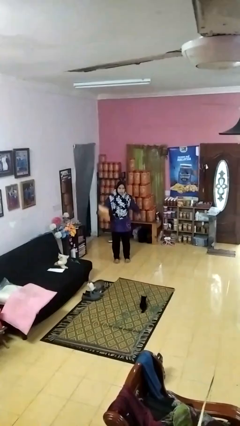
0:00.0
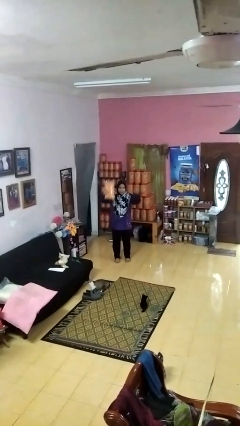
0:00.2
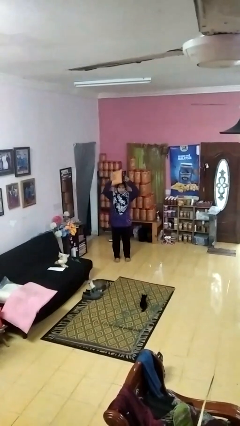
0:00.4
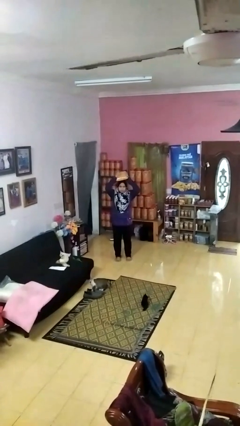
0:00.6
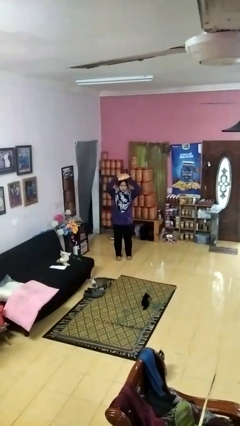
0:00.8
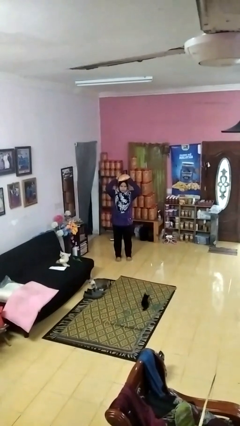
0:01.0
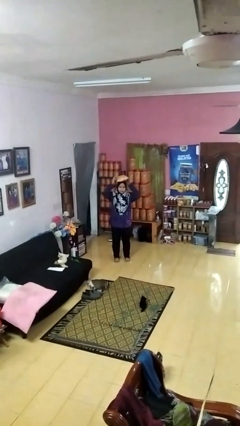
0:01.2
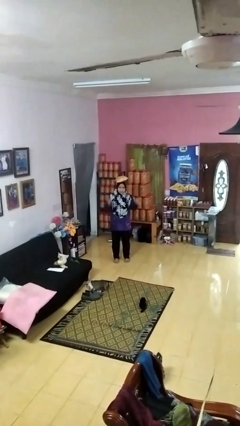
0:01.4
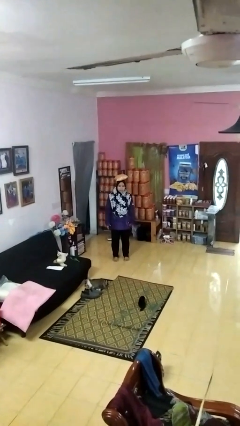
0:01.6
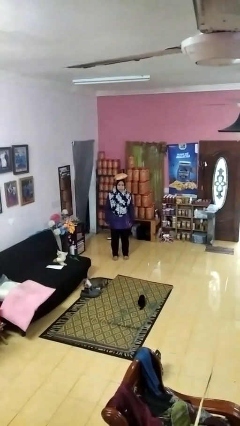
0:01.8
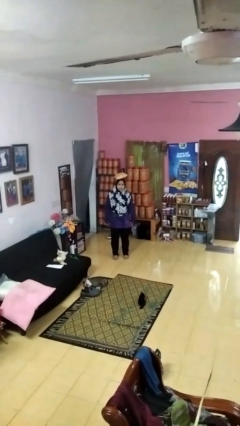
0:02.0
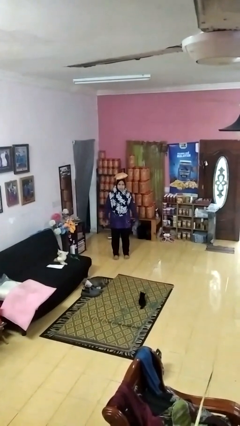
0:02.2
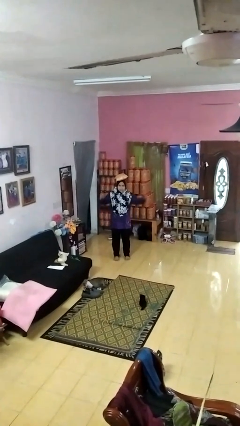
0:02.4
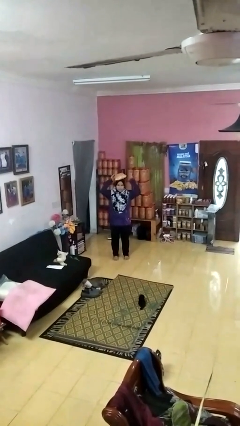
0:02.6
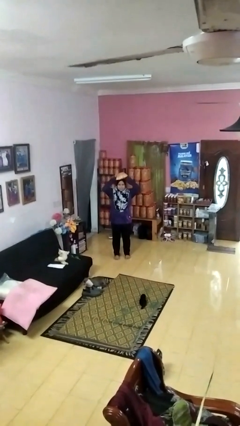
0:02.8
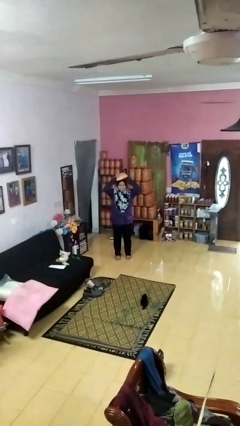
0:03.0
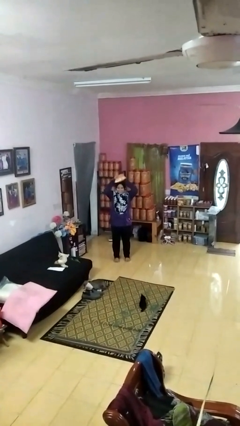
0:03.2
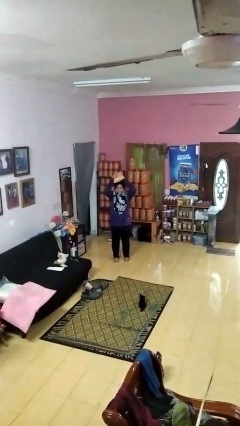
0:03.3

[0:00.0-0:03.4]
person holds object above head

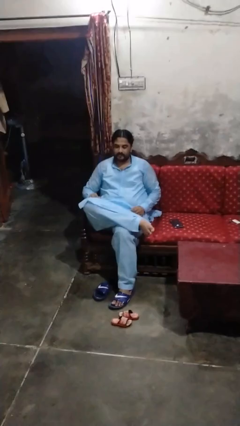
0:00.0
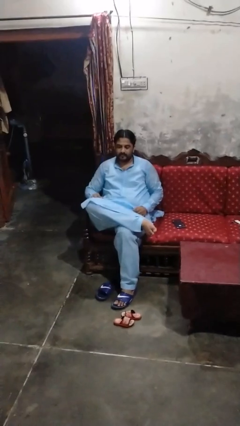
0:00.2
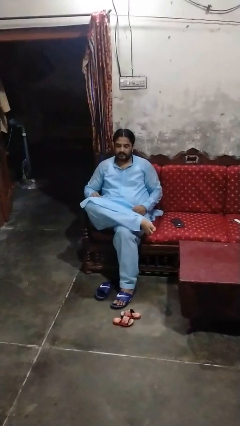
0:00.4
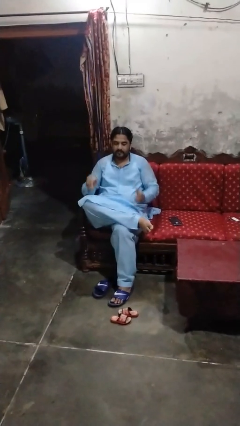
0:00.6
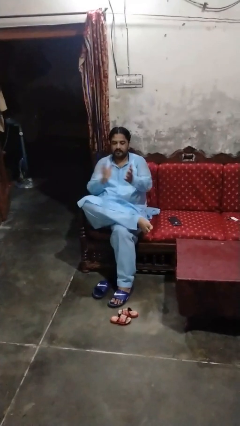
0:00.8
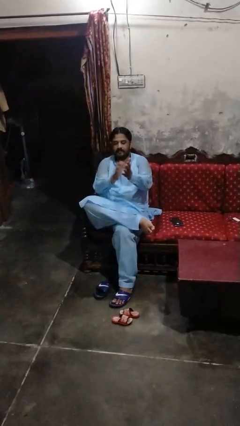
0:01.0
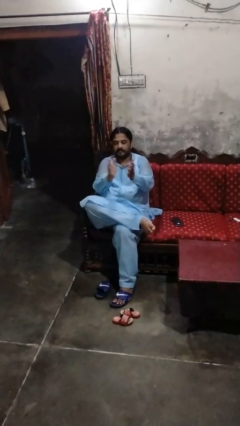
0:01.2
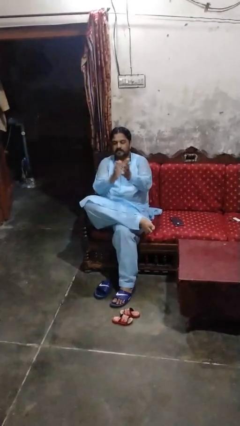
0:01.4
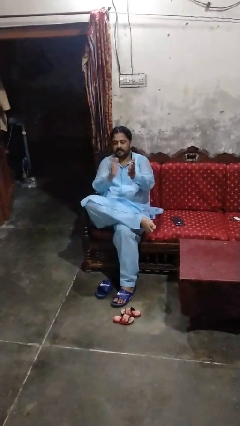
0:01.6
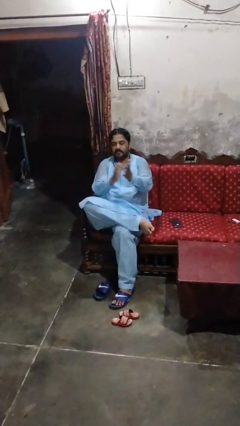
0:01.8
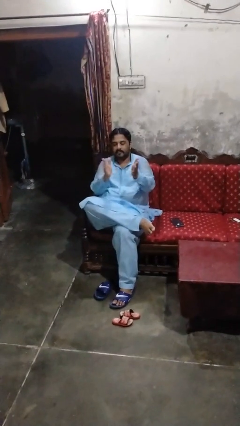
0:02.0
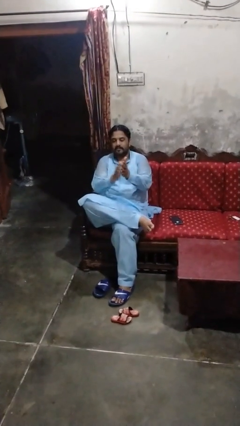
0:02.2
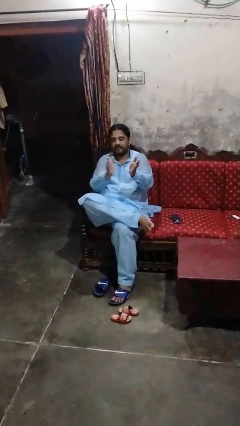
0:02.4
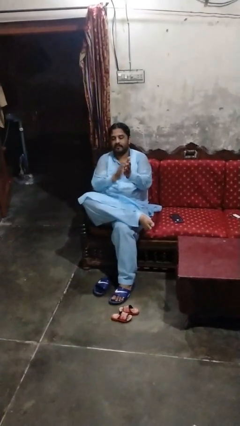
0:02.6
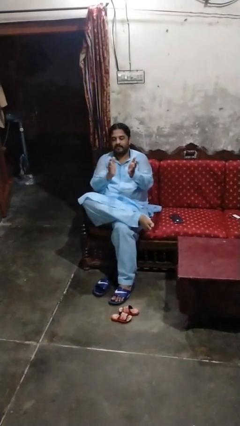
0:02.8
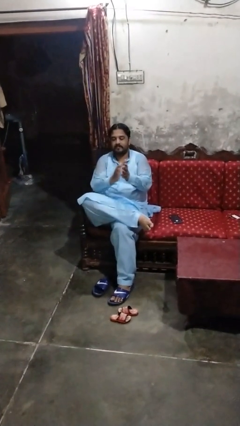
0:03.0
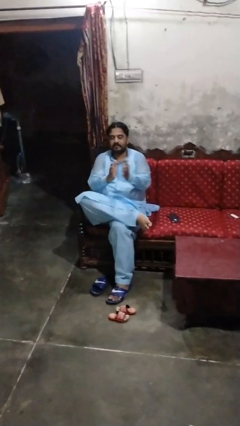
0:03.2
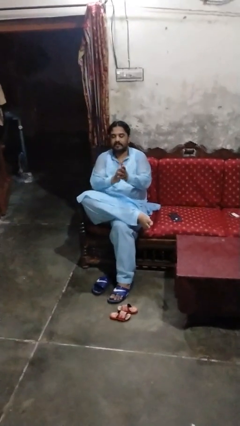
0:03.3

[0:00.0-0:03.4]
person claps hands

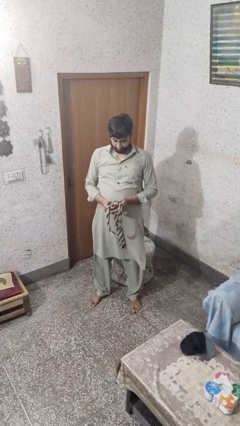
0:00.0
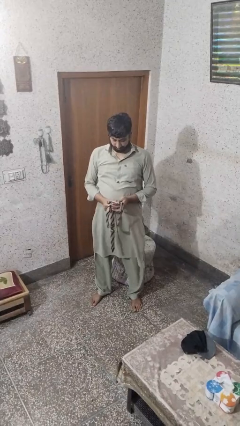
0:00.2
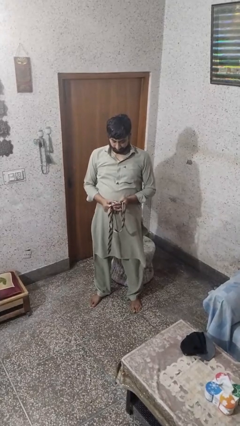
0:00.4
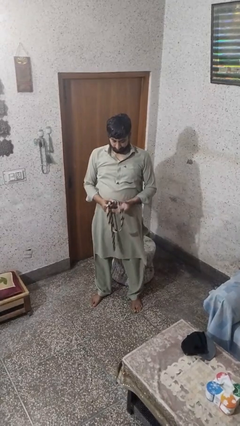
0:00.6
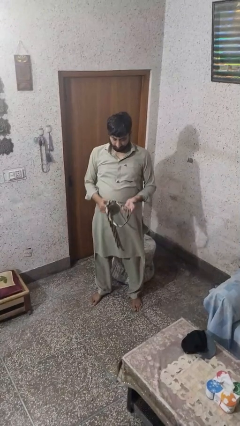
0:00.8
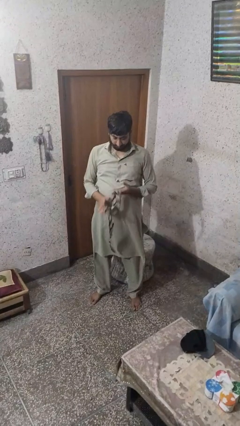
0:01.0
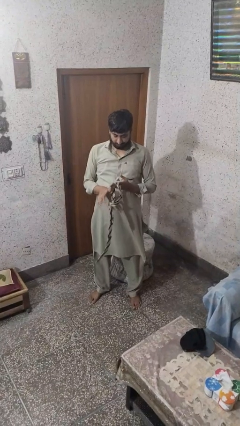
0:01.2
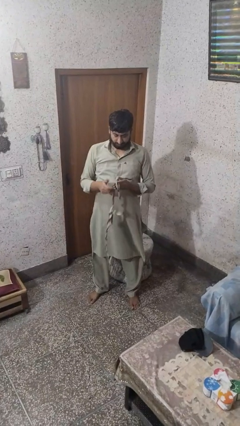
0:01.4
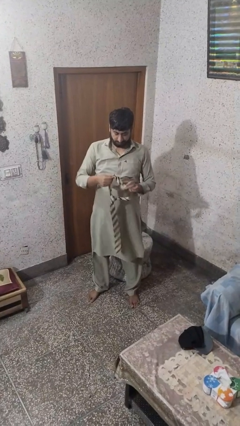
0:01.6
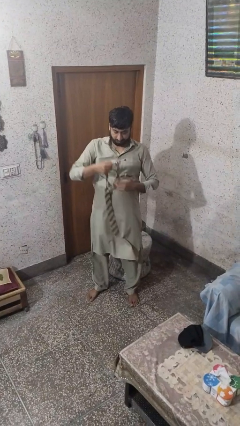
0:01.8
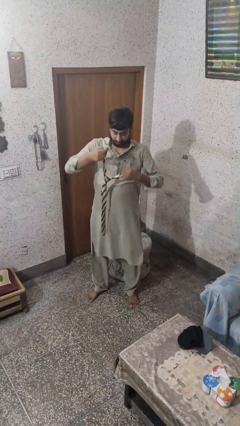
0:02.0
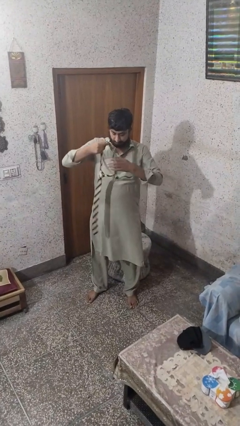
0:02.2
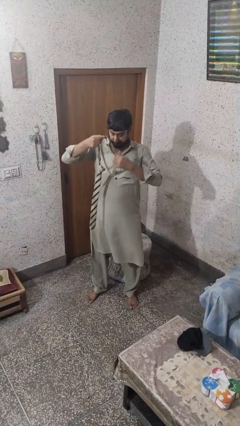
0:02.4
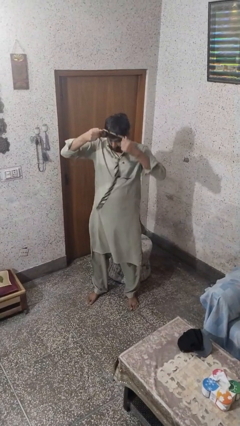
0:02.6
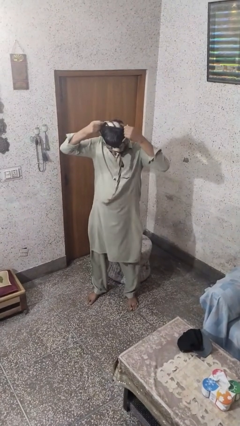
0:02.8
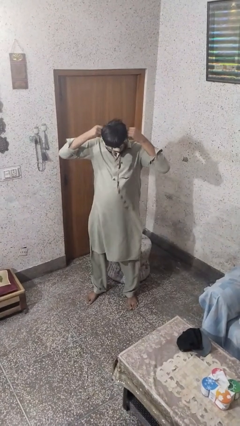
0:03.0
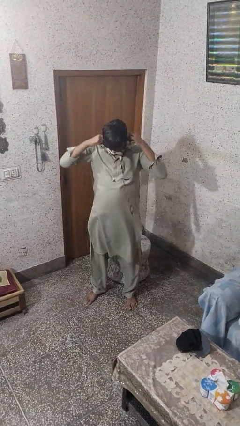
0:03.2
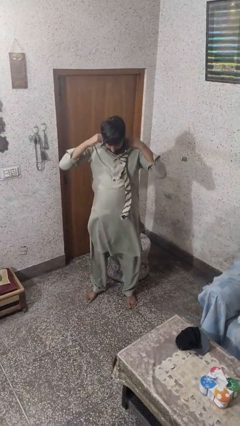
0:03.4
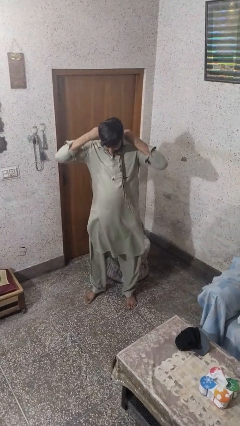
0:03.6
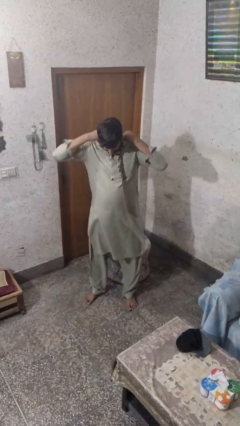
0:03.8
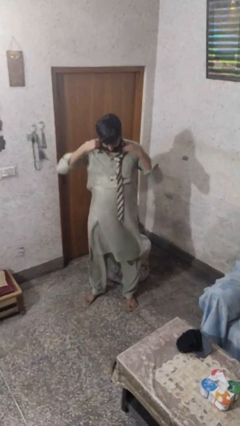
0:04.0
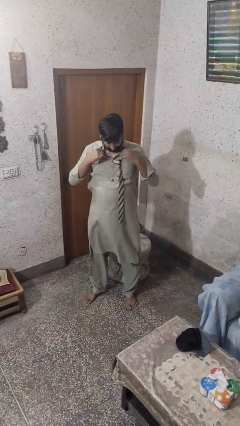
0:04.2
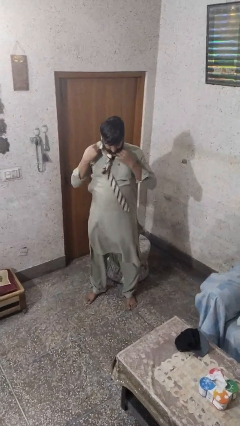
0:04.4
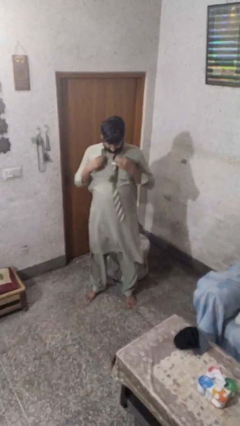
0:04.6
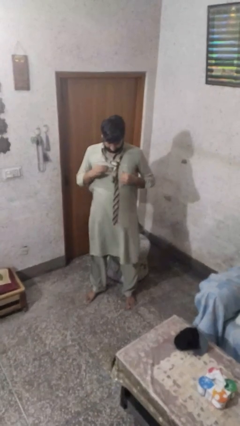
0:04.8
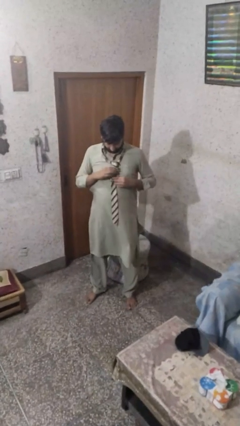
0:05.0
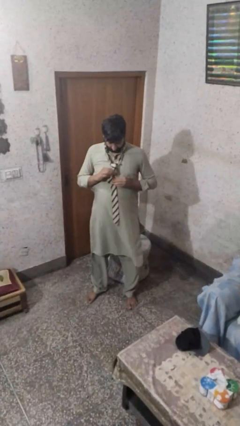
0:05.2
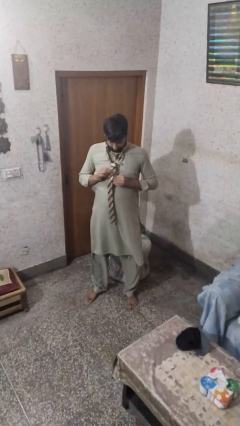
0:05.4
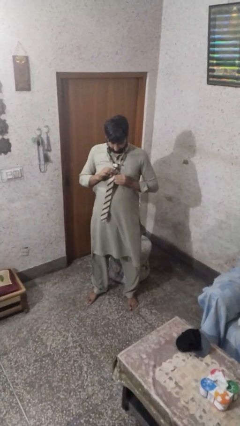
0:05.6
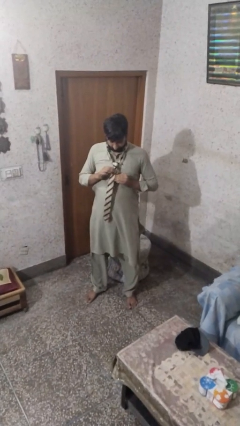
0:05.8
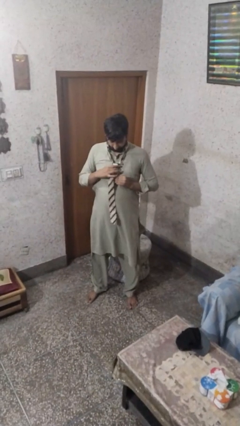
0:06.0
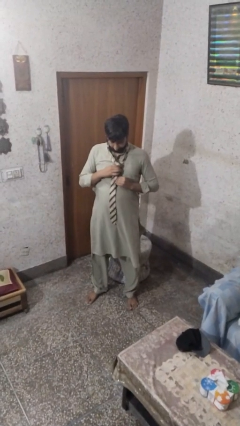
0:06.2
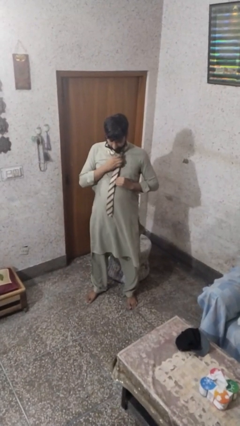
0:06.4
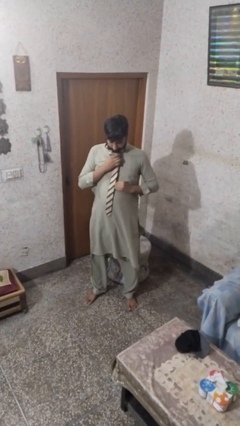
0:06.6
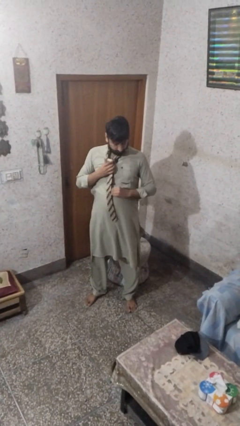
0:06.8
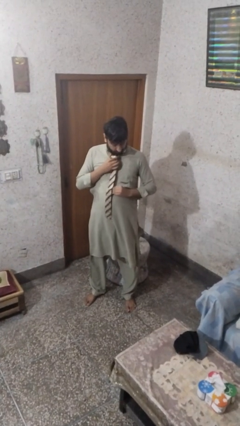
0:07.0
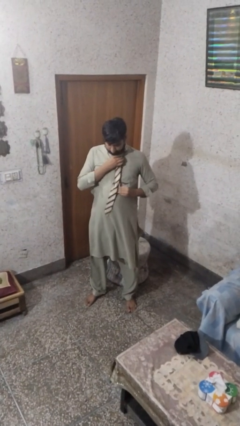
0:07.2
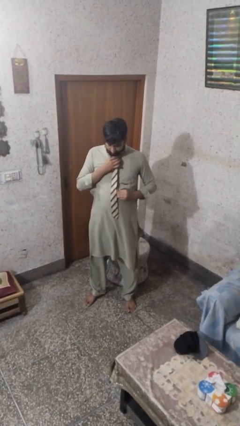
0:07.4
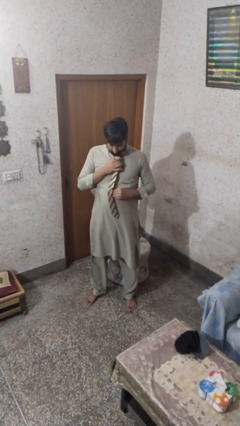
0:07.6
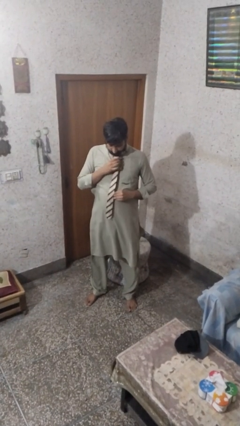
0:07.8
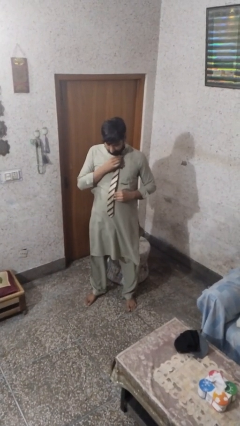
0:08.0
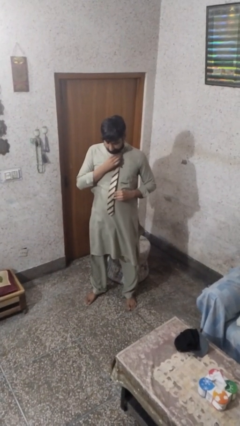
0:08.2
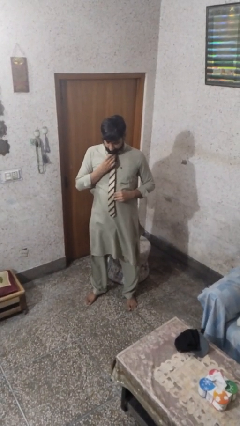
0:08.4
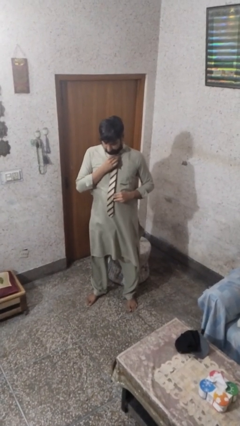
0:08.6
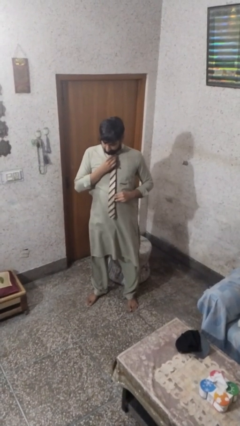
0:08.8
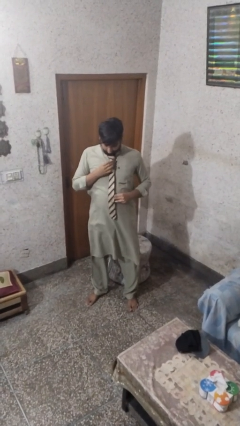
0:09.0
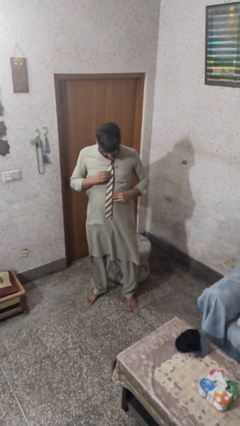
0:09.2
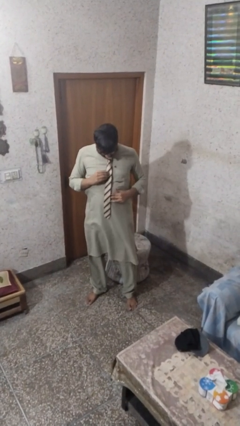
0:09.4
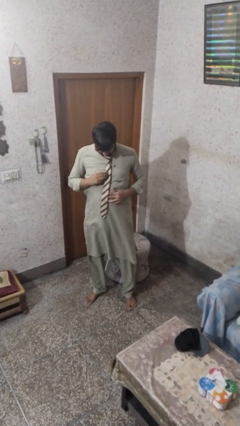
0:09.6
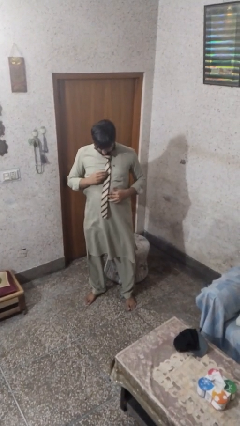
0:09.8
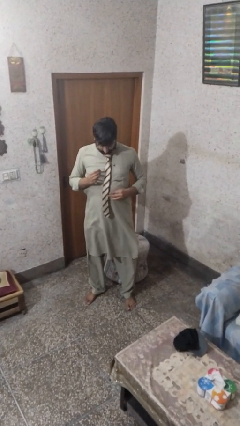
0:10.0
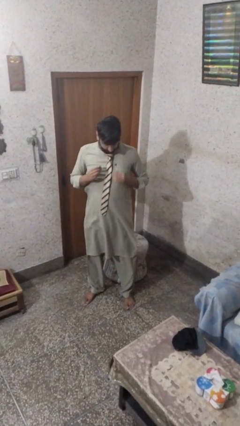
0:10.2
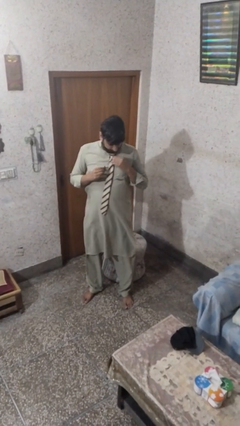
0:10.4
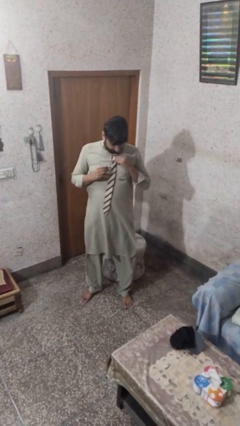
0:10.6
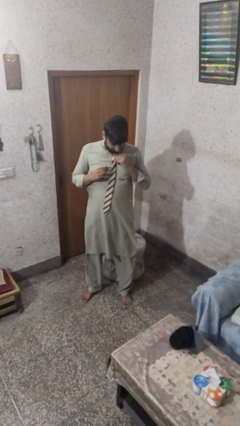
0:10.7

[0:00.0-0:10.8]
person puts on necktie

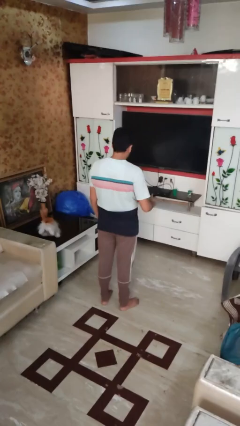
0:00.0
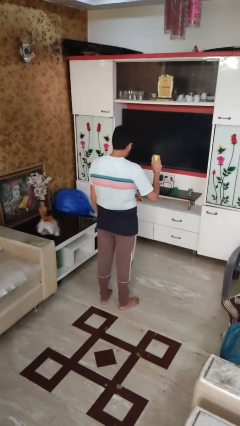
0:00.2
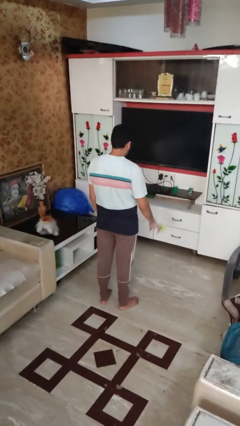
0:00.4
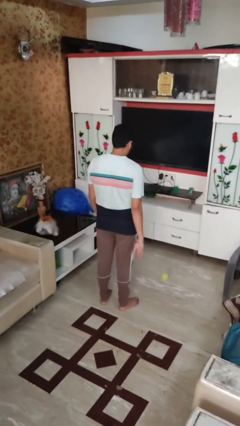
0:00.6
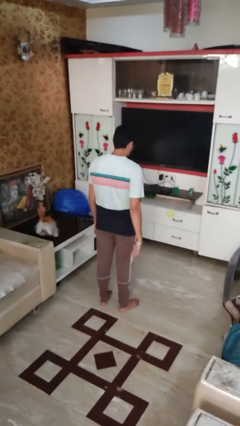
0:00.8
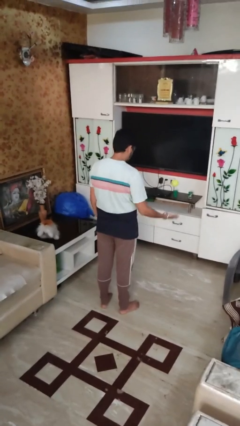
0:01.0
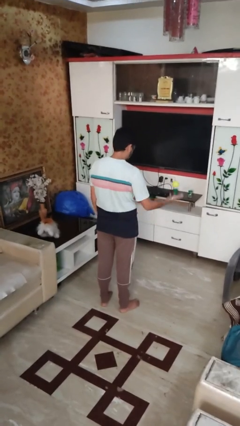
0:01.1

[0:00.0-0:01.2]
person bounces ball on floor
